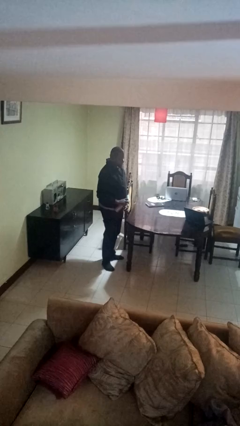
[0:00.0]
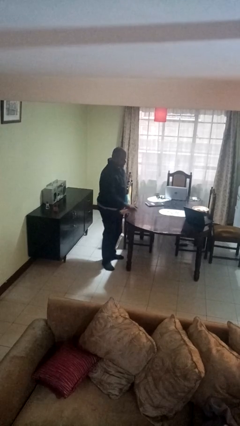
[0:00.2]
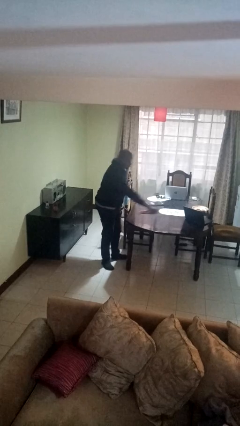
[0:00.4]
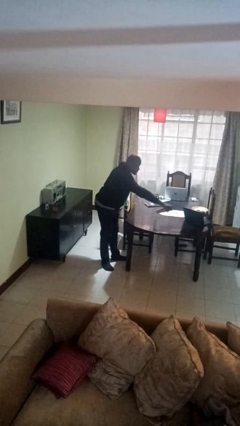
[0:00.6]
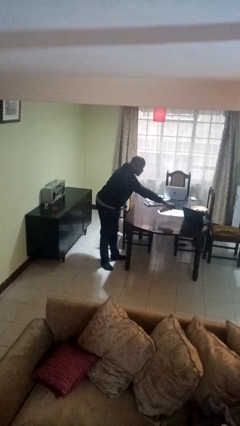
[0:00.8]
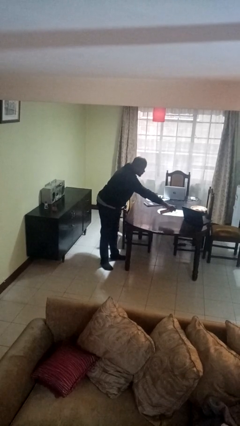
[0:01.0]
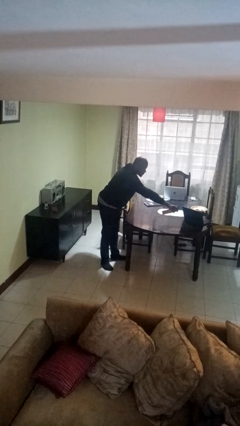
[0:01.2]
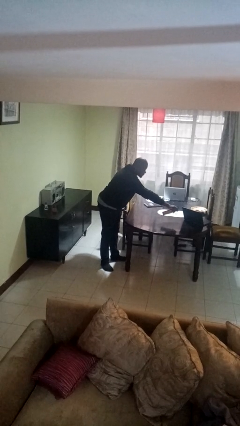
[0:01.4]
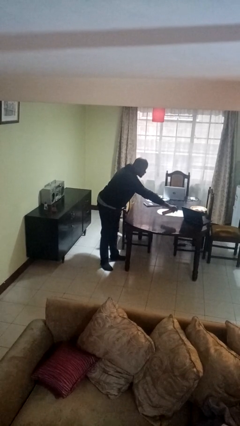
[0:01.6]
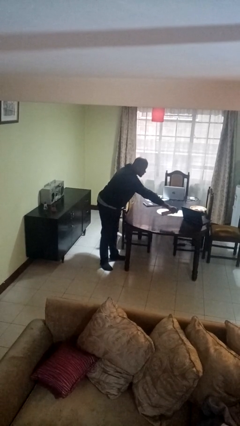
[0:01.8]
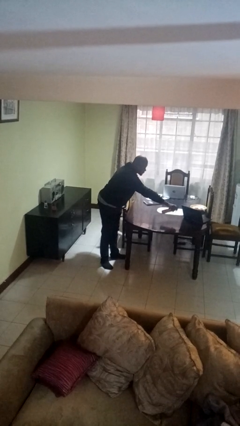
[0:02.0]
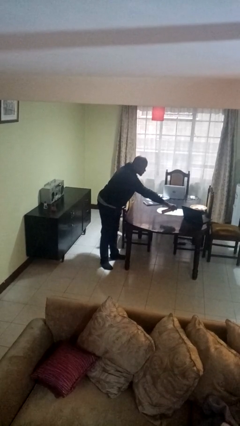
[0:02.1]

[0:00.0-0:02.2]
person sprays from bottle

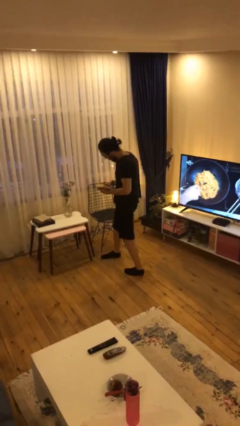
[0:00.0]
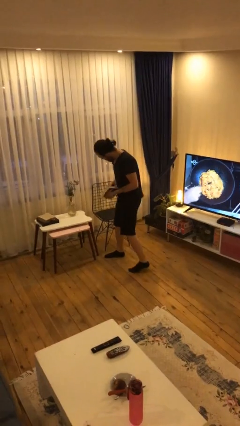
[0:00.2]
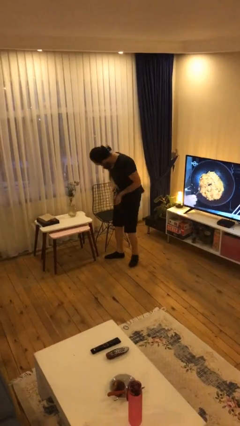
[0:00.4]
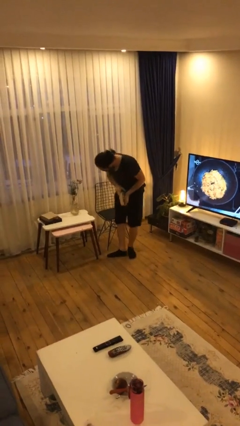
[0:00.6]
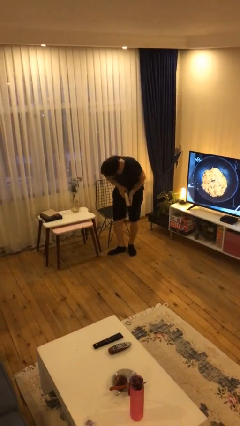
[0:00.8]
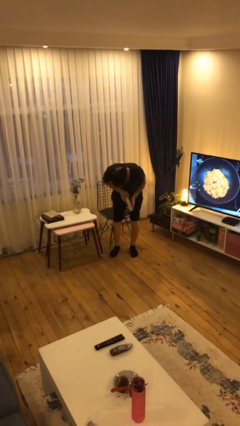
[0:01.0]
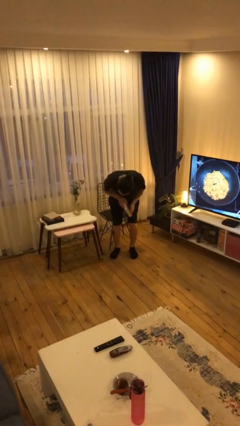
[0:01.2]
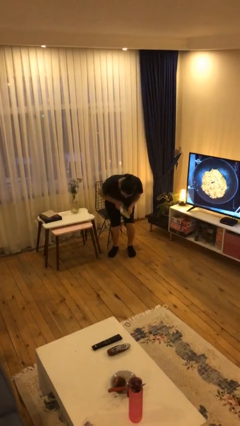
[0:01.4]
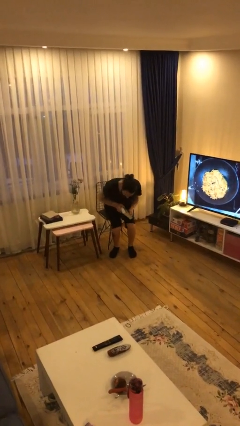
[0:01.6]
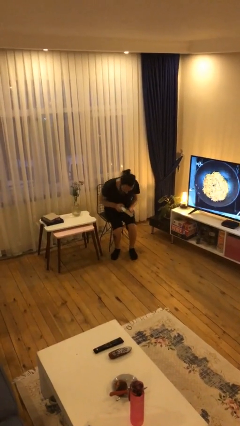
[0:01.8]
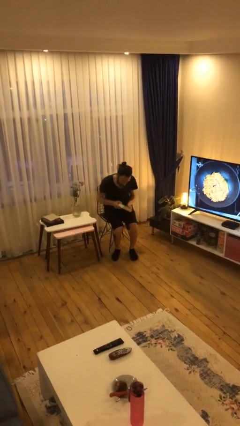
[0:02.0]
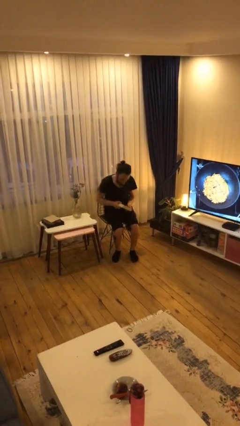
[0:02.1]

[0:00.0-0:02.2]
person sits down

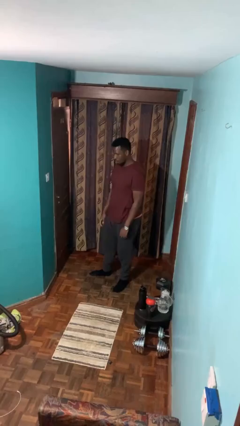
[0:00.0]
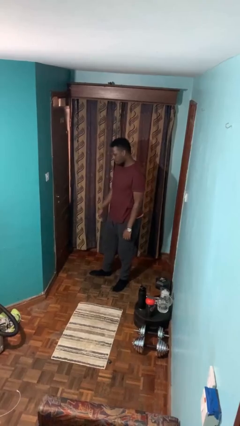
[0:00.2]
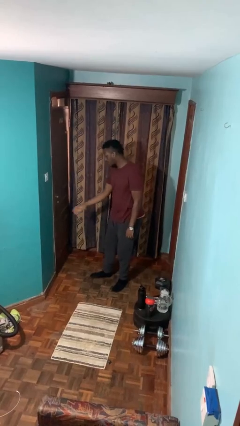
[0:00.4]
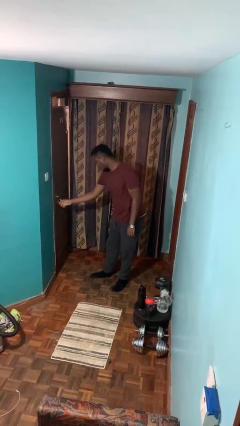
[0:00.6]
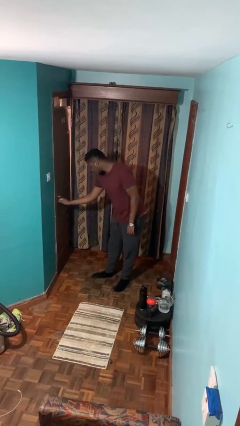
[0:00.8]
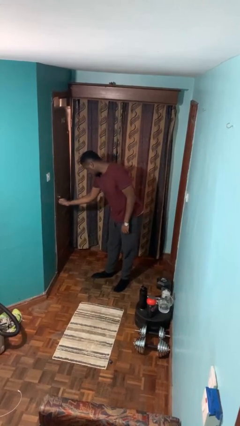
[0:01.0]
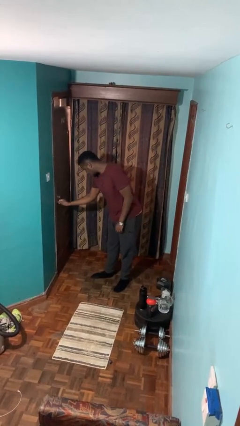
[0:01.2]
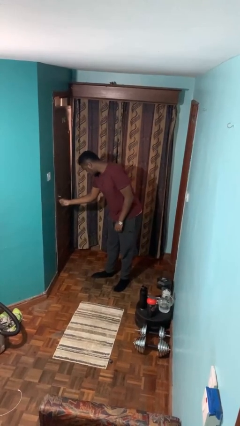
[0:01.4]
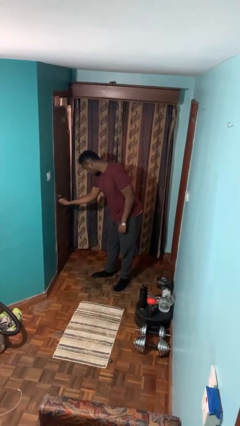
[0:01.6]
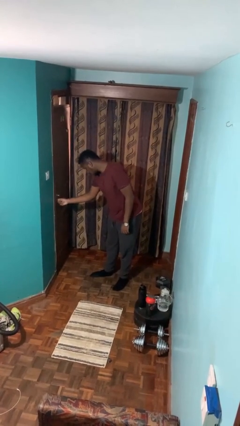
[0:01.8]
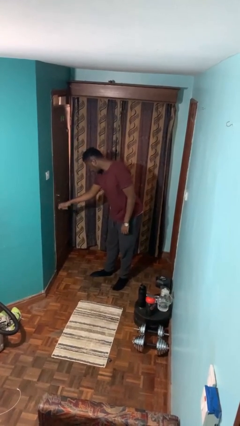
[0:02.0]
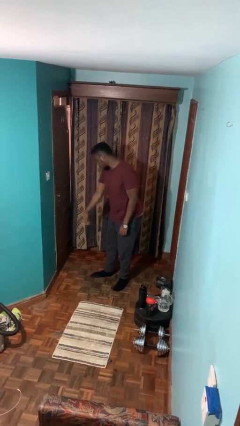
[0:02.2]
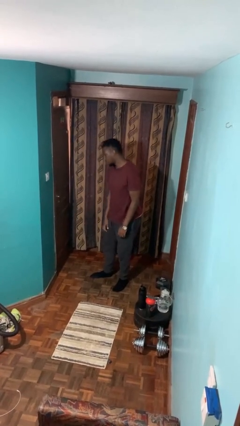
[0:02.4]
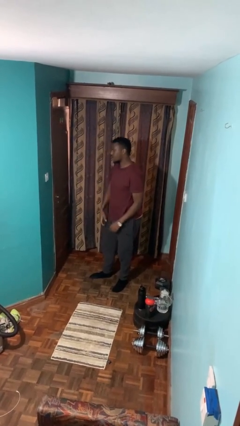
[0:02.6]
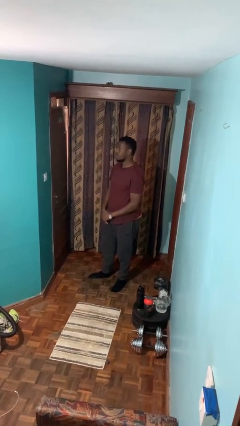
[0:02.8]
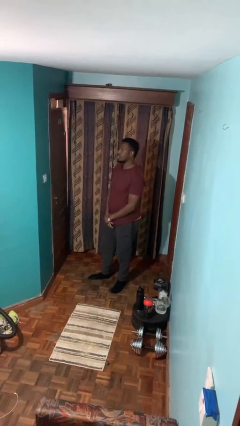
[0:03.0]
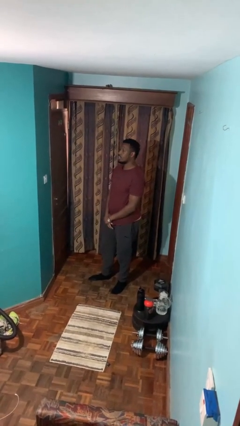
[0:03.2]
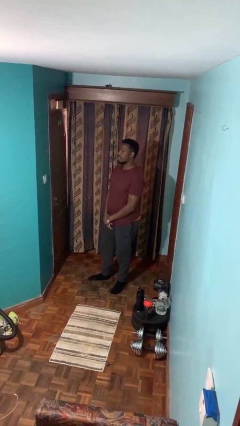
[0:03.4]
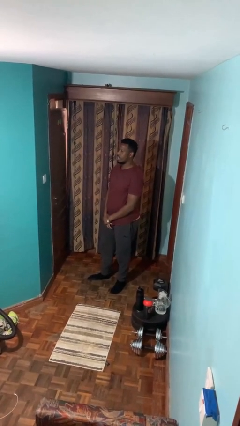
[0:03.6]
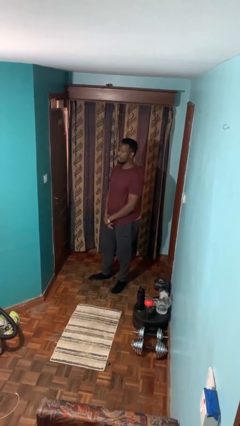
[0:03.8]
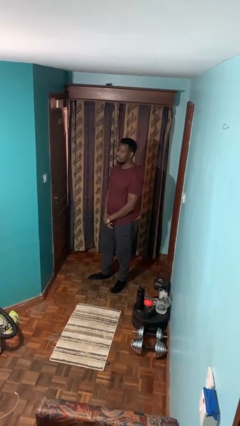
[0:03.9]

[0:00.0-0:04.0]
person locks door with keys

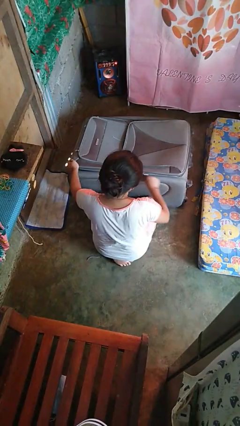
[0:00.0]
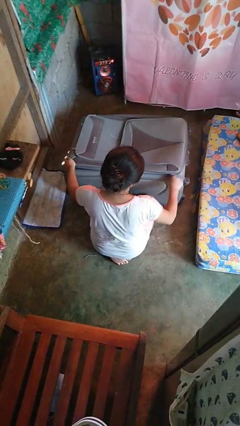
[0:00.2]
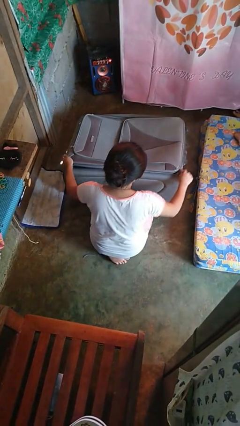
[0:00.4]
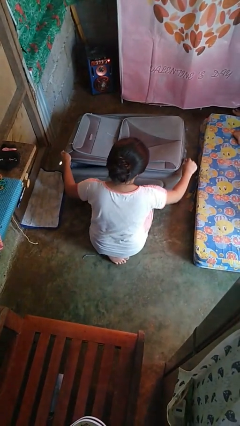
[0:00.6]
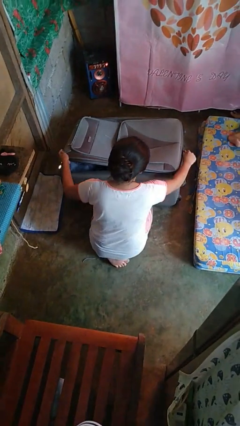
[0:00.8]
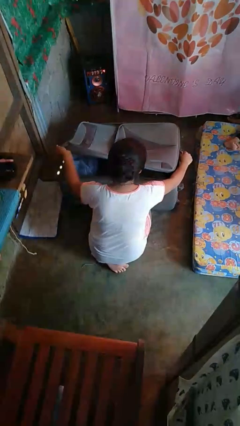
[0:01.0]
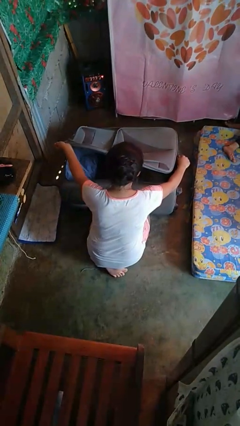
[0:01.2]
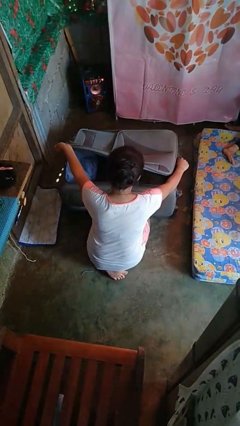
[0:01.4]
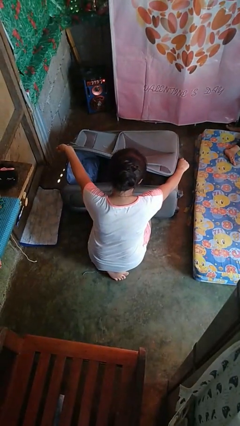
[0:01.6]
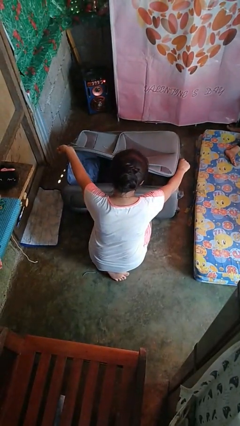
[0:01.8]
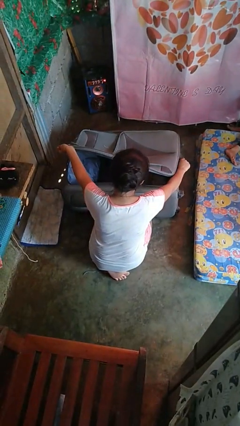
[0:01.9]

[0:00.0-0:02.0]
person opens suitcase

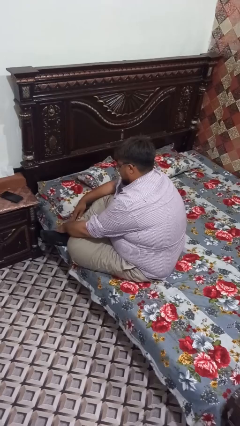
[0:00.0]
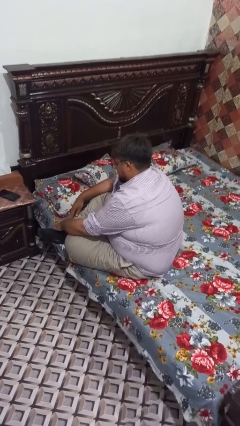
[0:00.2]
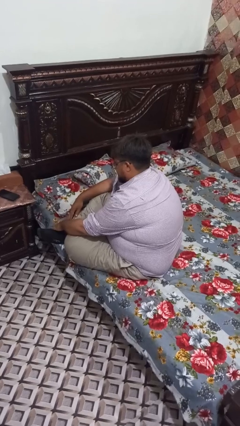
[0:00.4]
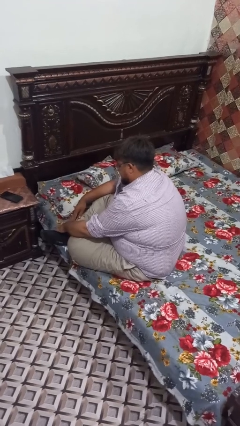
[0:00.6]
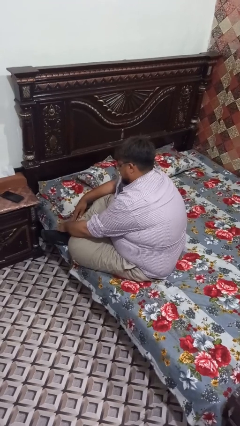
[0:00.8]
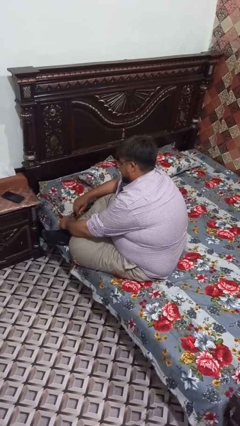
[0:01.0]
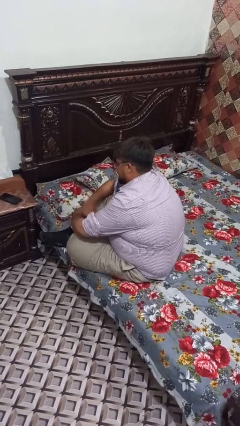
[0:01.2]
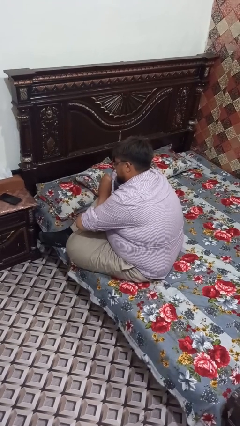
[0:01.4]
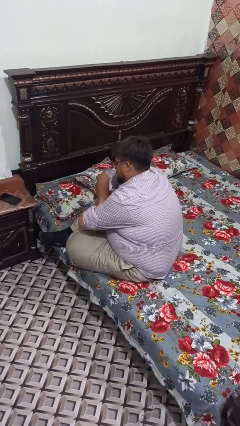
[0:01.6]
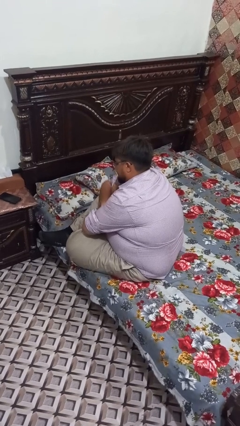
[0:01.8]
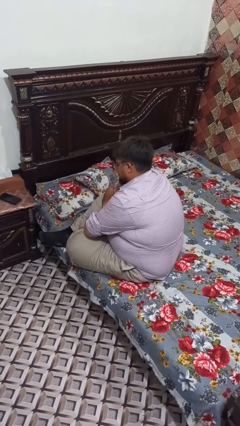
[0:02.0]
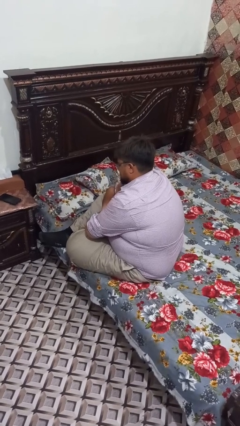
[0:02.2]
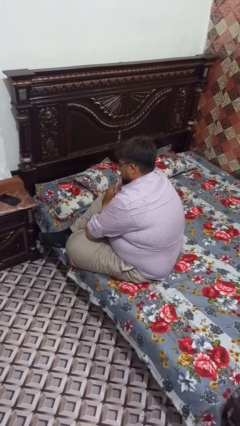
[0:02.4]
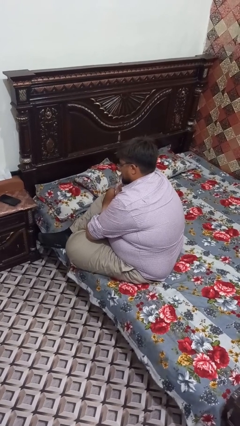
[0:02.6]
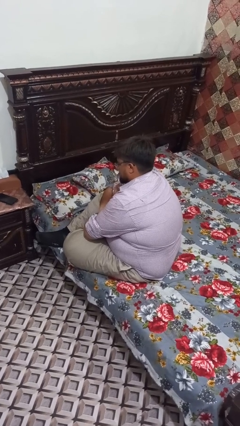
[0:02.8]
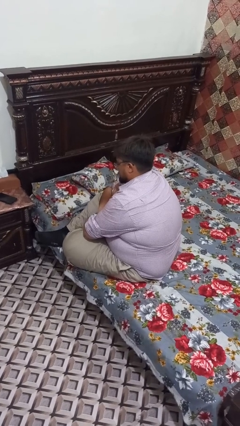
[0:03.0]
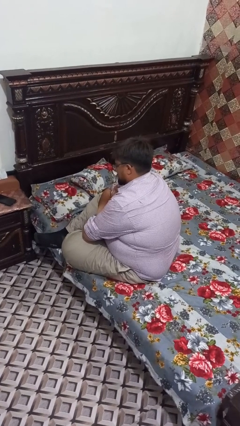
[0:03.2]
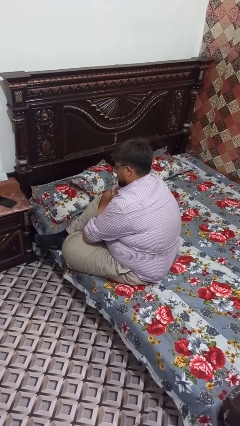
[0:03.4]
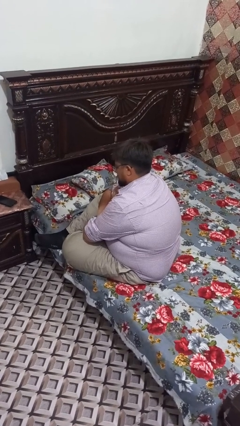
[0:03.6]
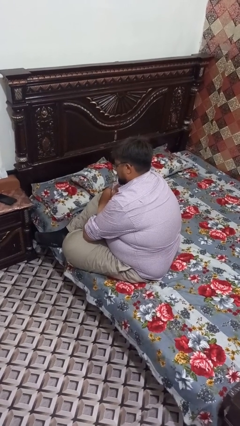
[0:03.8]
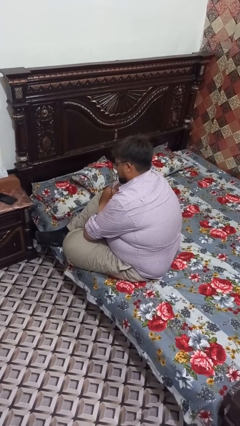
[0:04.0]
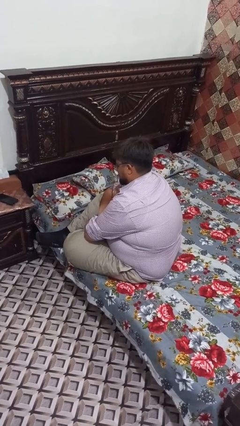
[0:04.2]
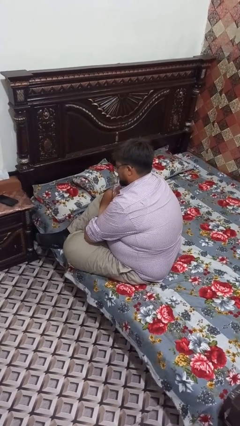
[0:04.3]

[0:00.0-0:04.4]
person crosses arms

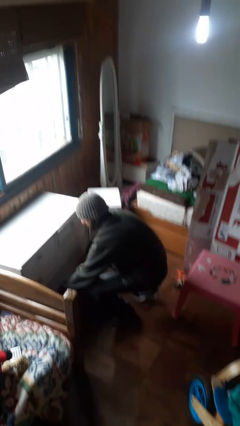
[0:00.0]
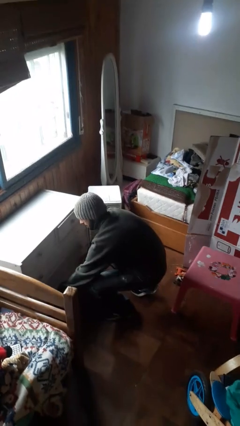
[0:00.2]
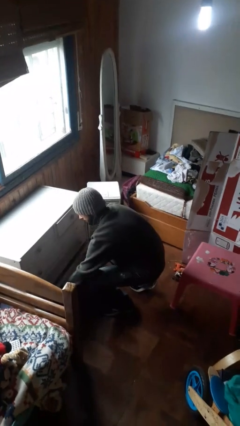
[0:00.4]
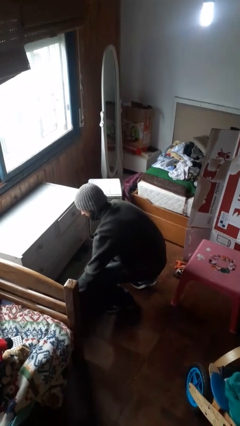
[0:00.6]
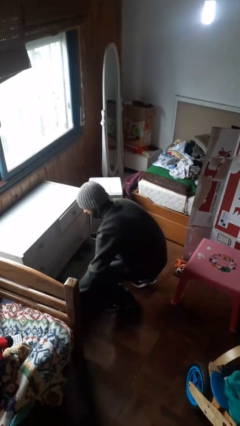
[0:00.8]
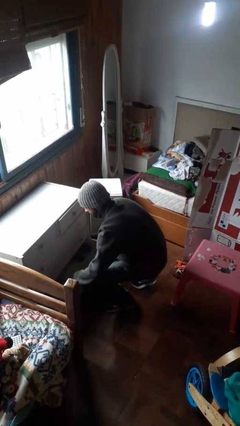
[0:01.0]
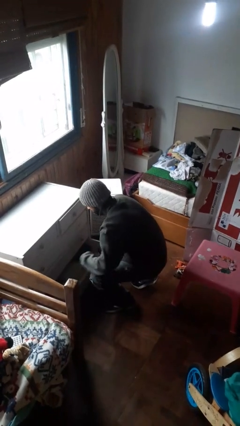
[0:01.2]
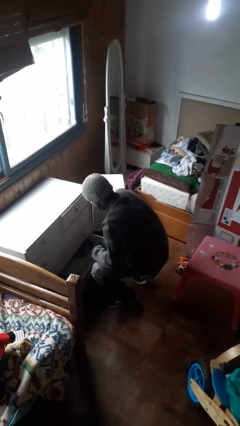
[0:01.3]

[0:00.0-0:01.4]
person opens dresser drawer

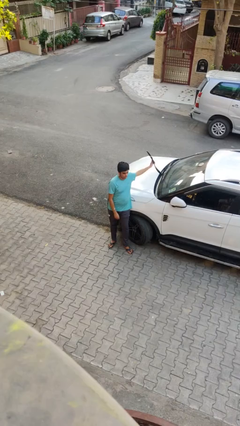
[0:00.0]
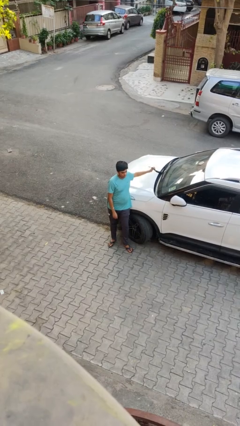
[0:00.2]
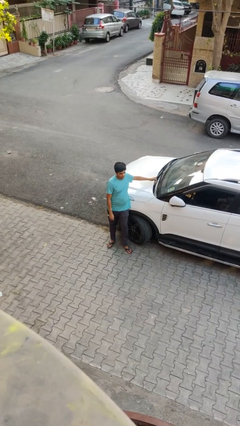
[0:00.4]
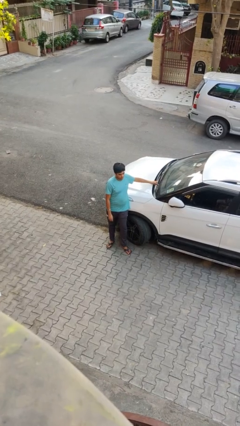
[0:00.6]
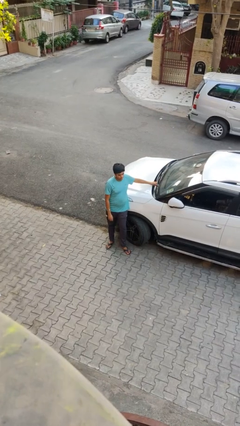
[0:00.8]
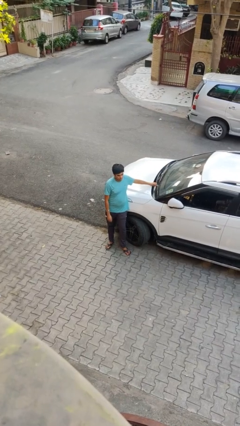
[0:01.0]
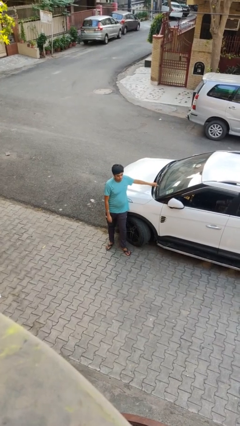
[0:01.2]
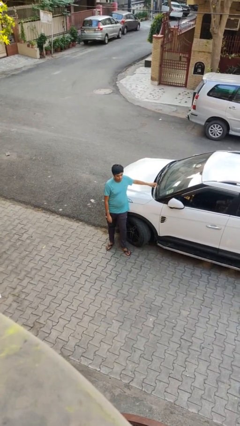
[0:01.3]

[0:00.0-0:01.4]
person flips down car wipers
